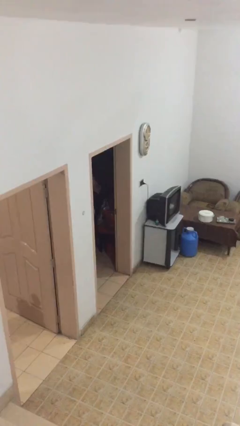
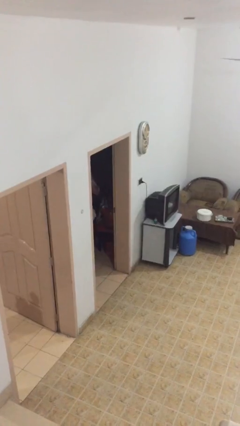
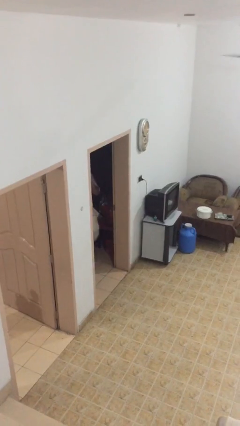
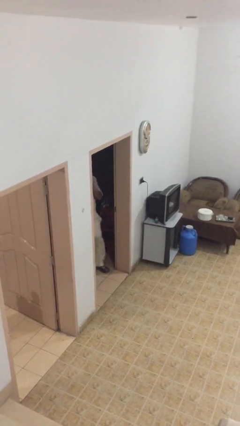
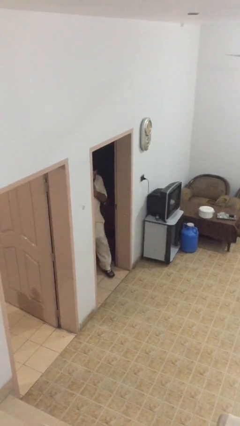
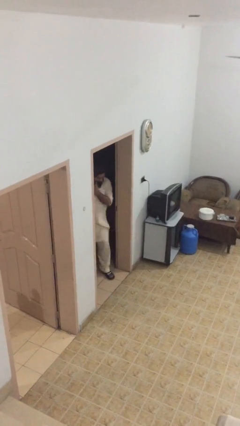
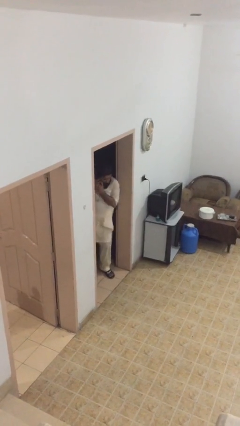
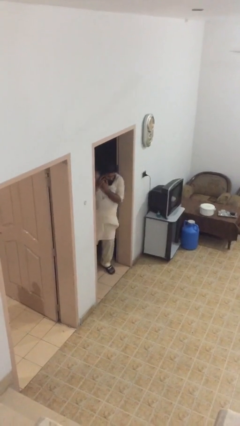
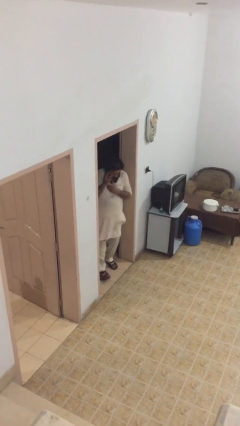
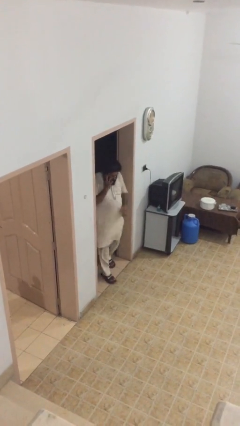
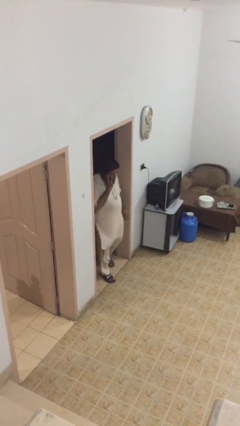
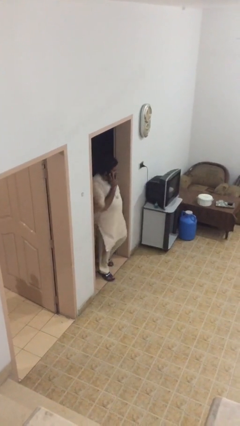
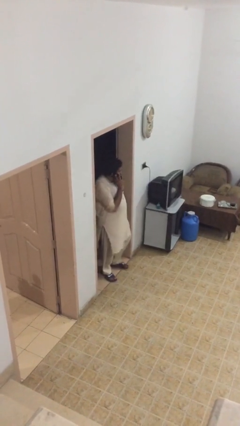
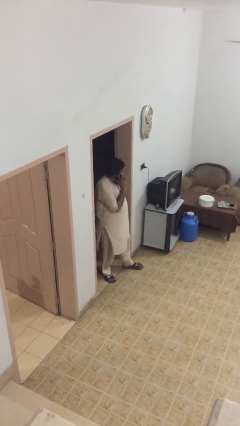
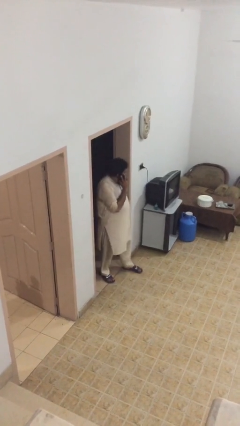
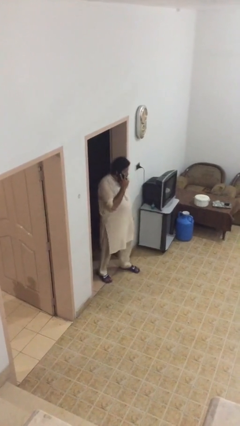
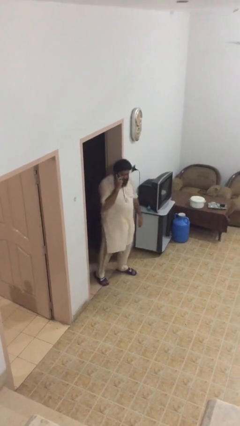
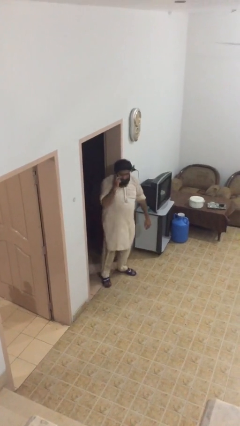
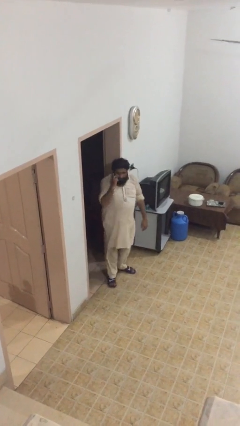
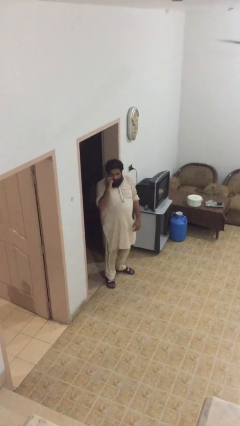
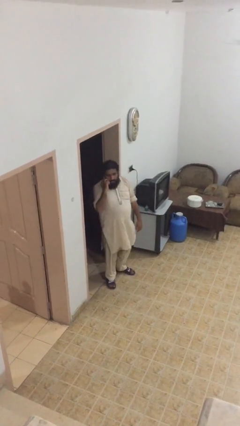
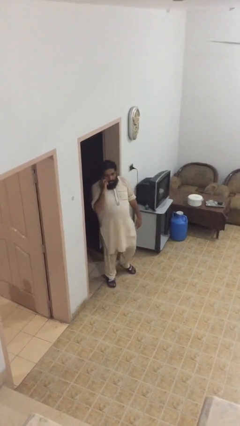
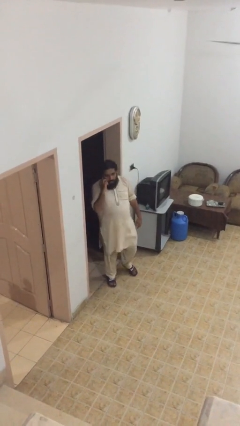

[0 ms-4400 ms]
person enters scene through structure

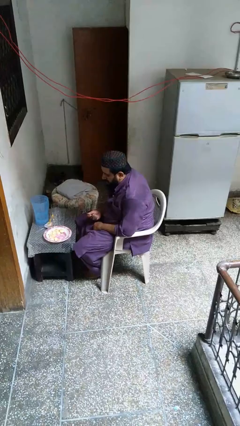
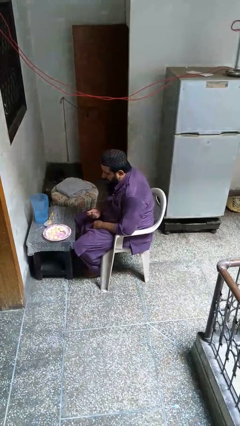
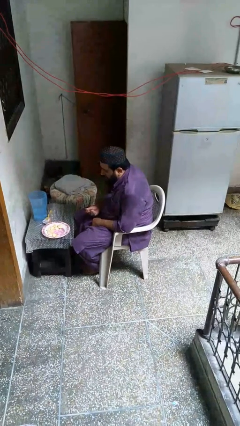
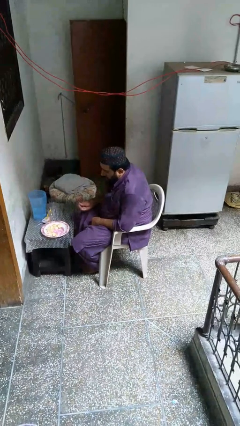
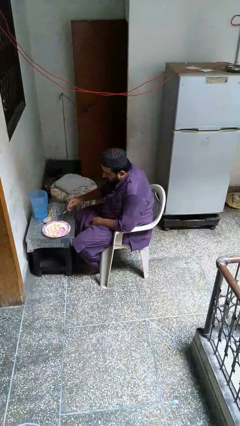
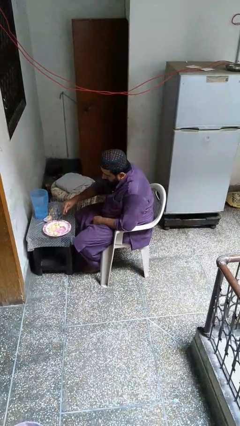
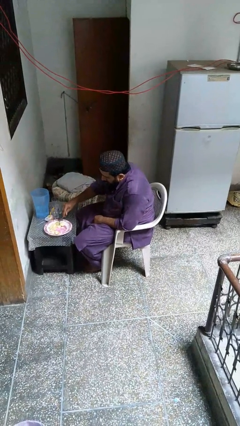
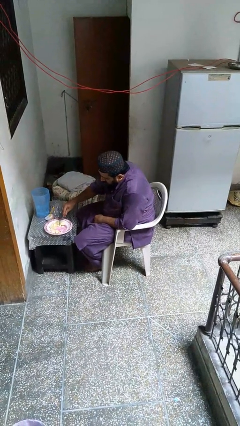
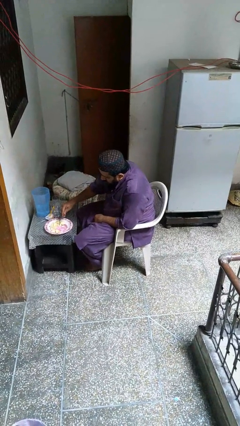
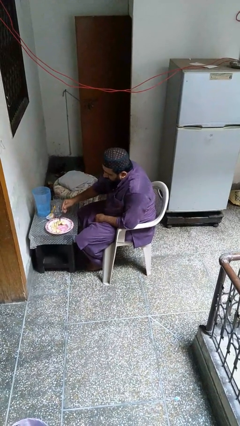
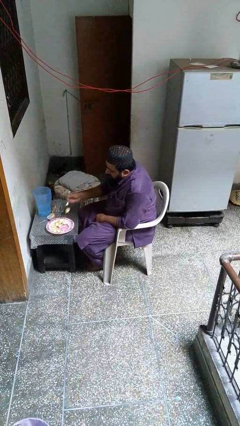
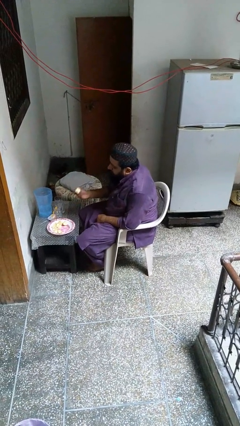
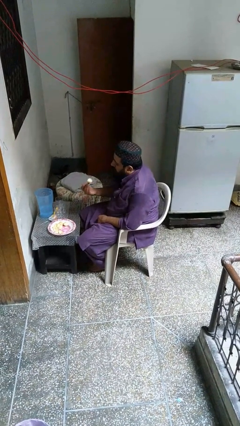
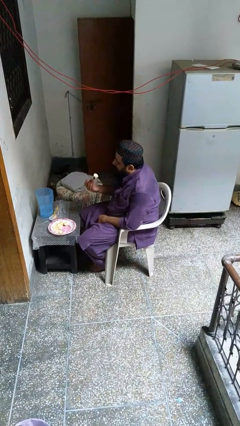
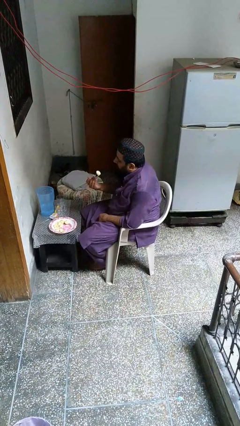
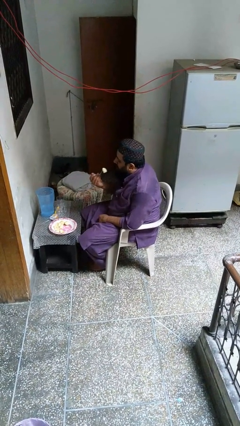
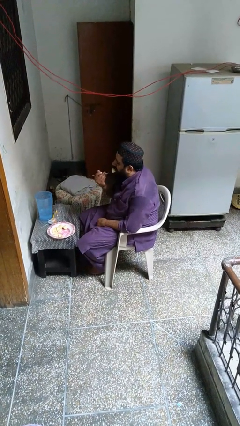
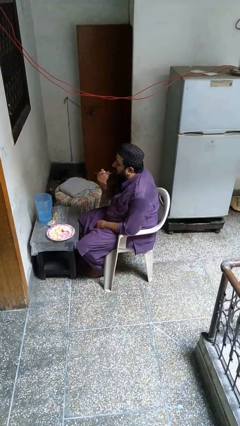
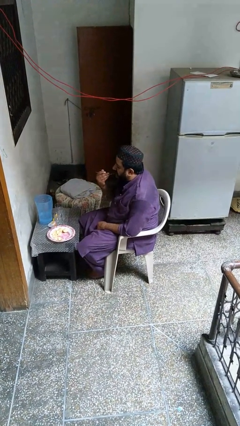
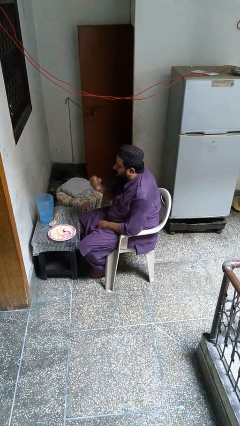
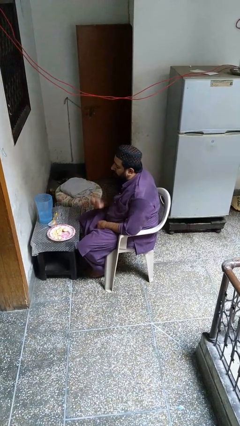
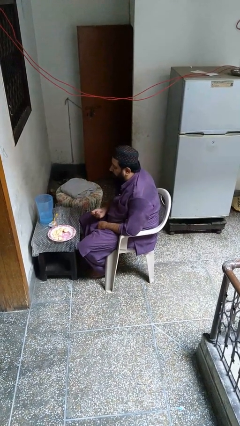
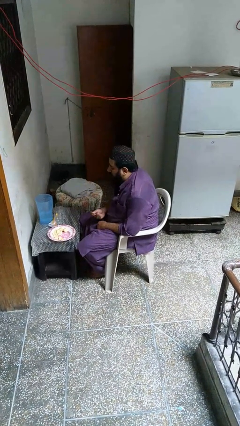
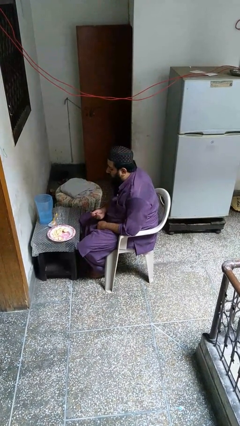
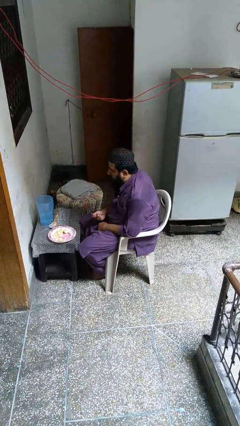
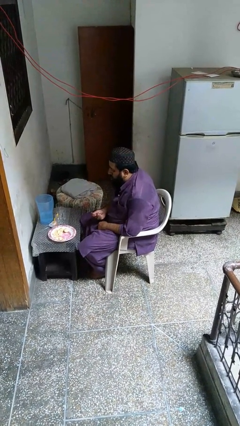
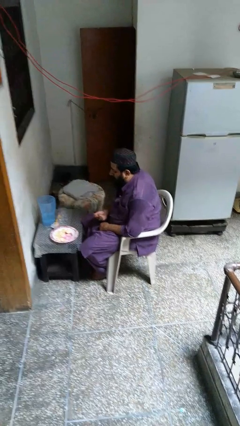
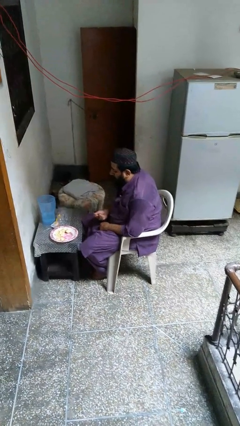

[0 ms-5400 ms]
person eats with utensil

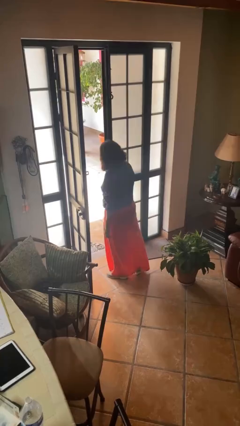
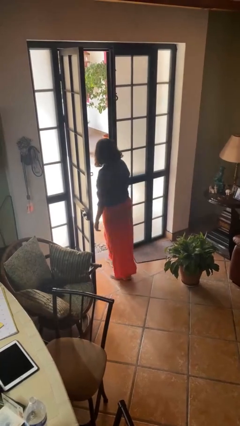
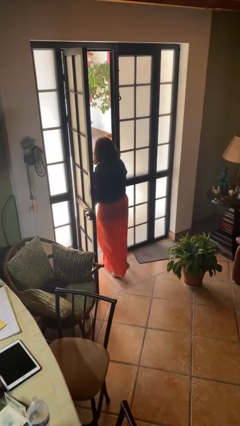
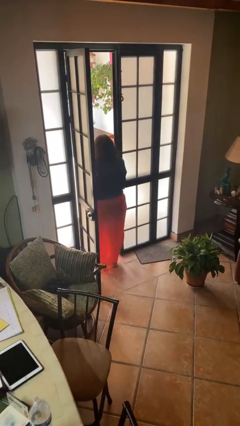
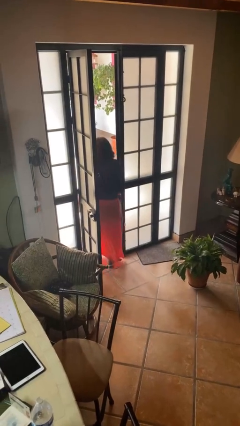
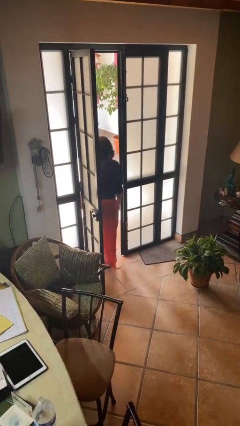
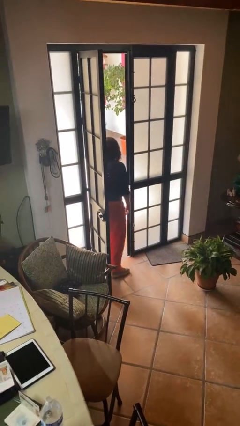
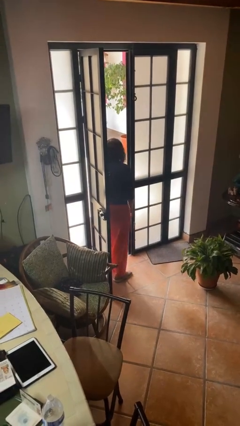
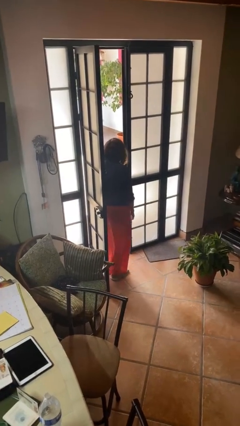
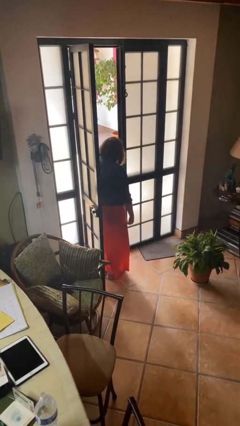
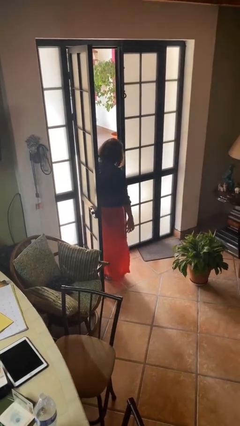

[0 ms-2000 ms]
person bumps into wall

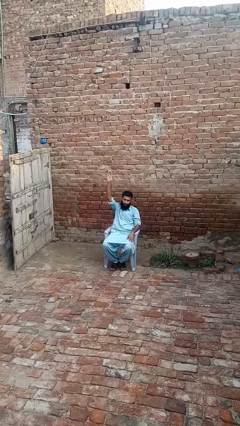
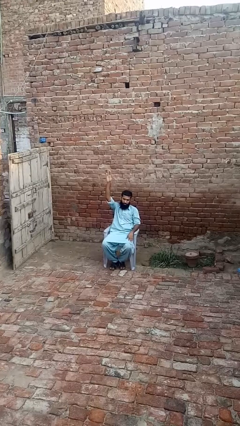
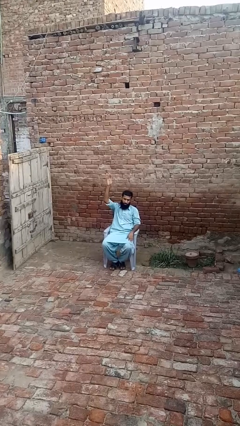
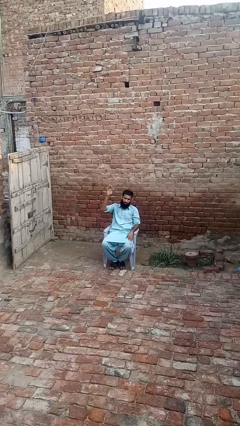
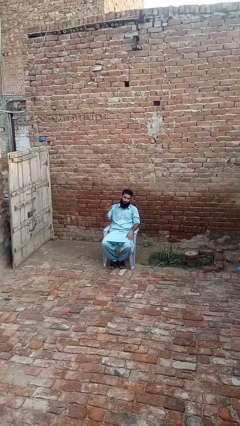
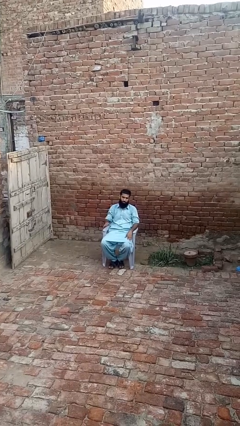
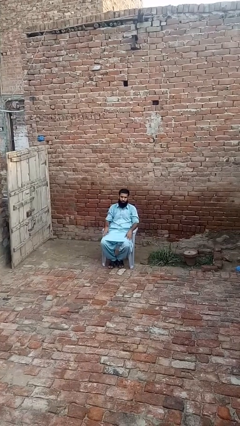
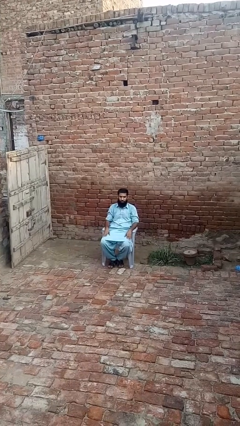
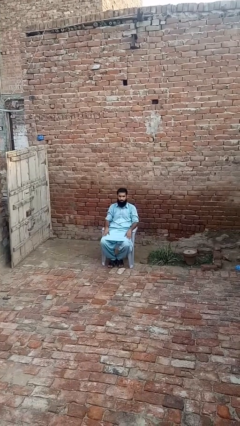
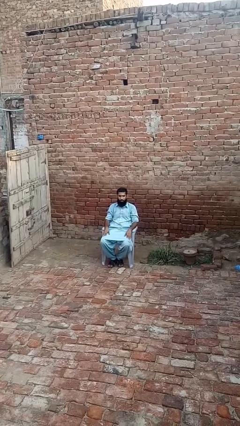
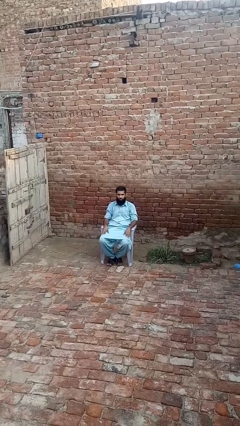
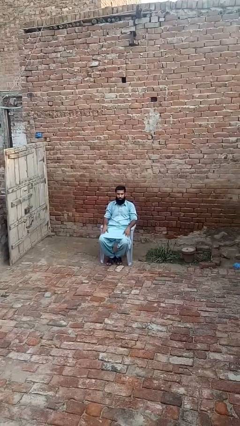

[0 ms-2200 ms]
person gestures lower hand

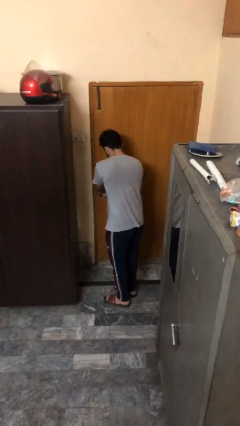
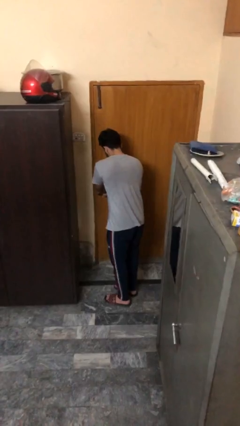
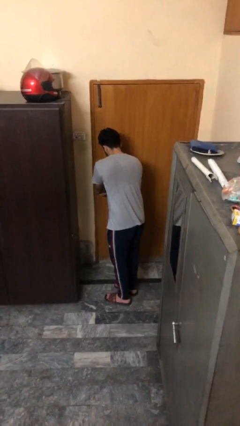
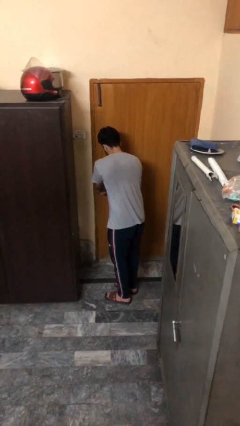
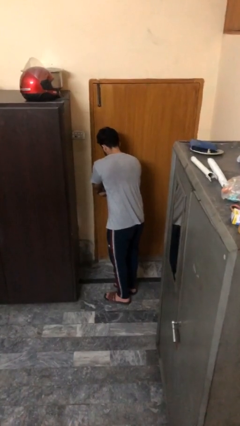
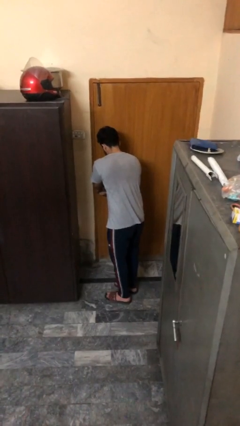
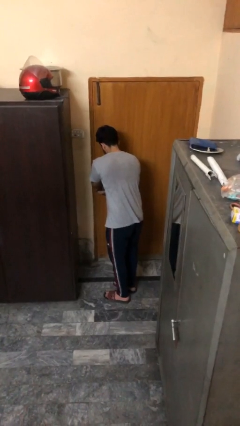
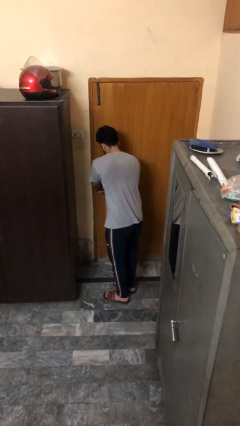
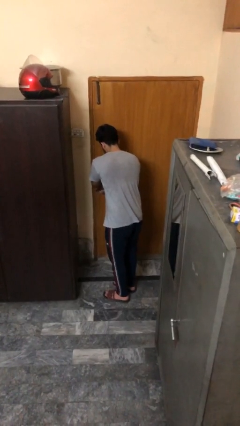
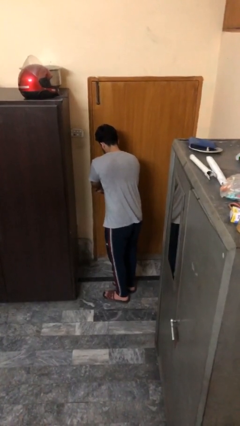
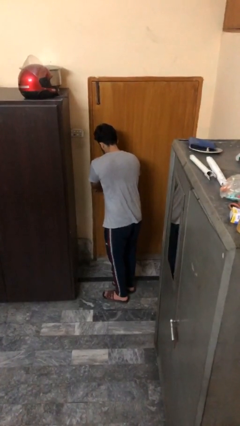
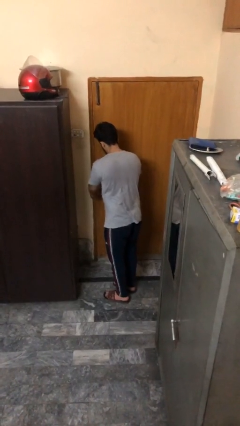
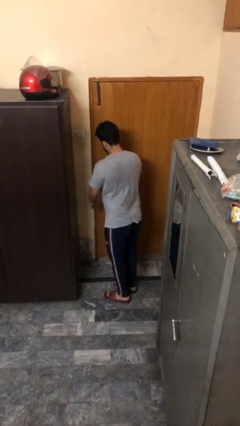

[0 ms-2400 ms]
person unlocks door with keys

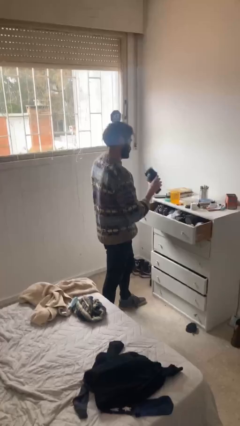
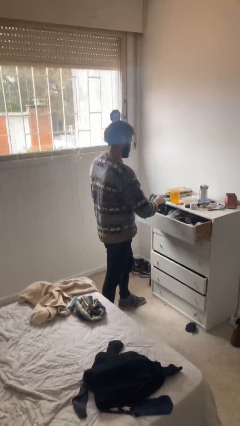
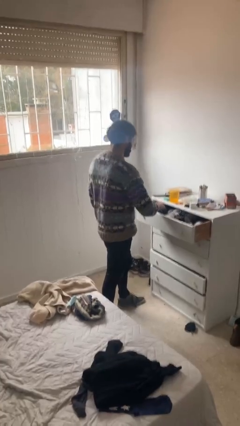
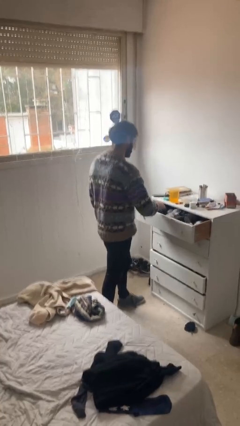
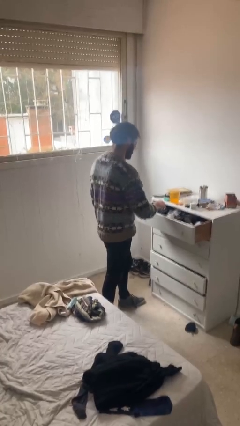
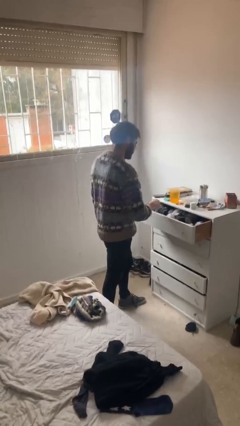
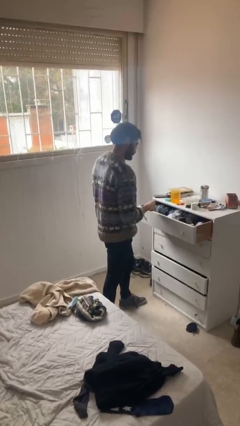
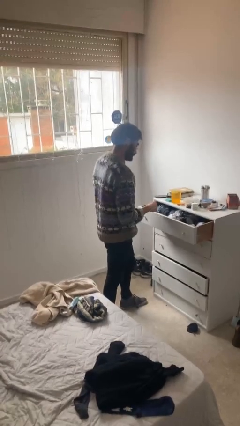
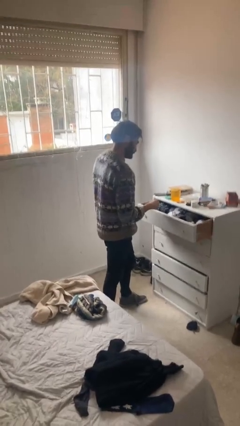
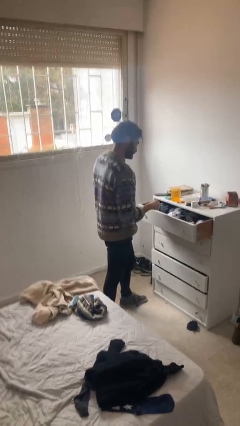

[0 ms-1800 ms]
person puts clothes into dresser
